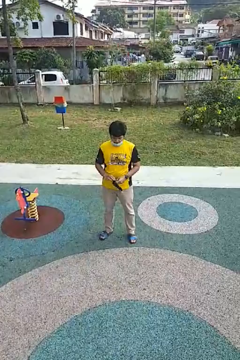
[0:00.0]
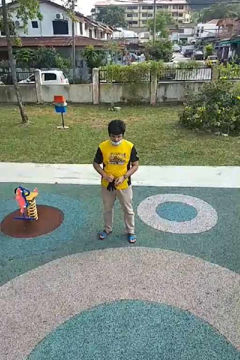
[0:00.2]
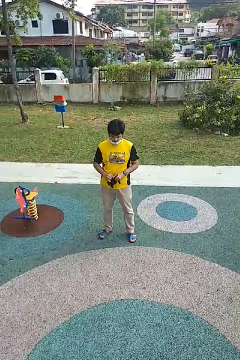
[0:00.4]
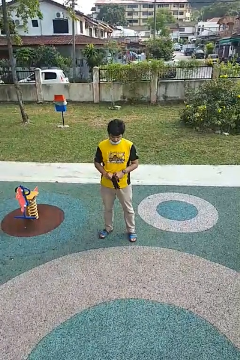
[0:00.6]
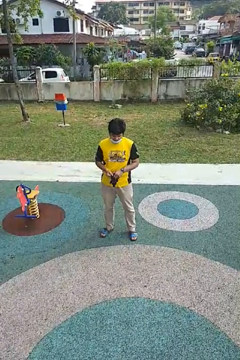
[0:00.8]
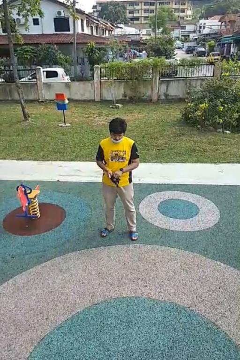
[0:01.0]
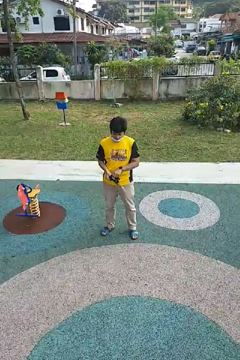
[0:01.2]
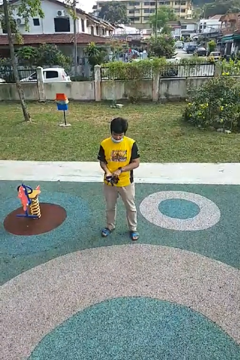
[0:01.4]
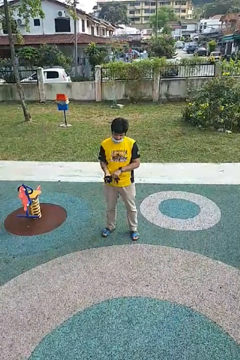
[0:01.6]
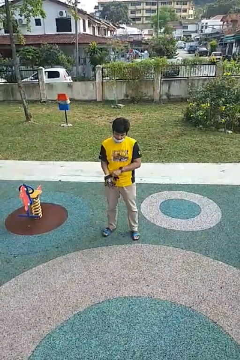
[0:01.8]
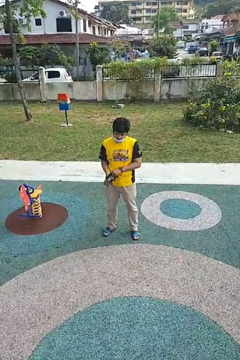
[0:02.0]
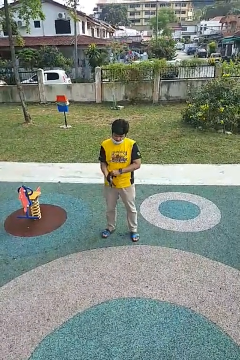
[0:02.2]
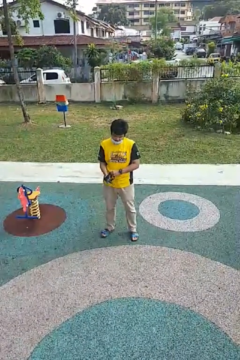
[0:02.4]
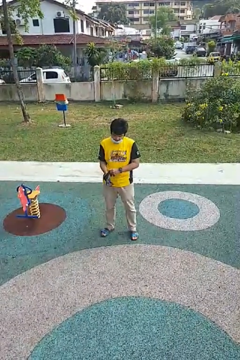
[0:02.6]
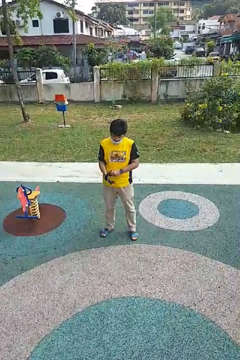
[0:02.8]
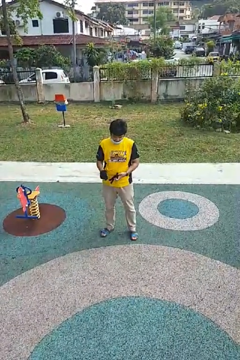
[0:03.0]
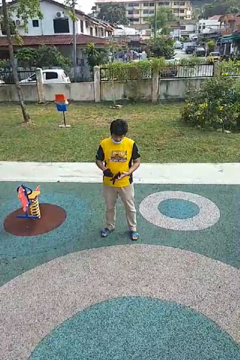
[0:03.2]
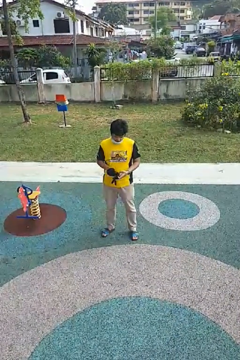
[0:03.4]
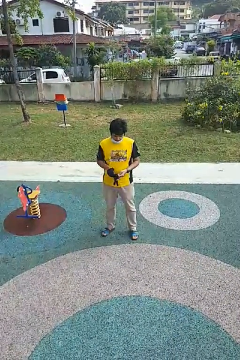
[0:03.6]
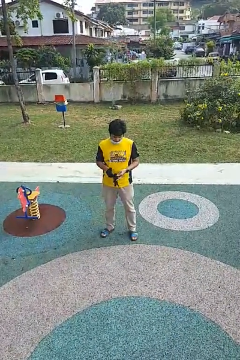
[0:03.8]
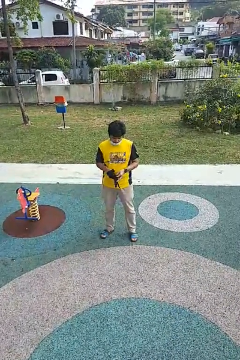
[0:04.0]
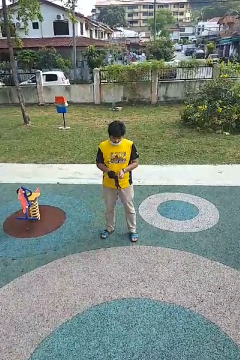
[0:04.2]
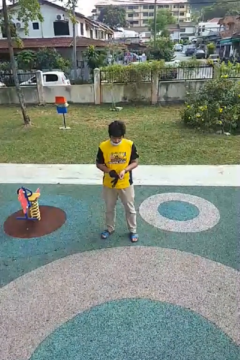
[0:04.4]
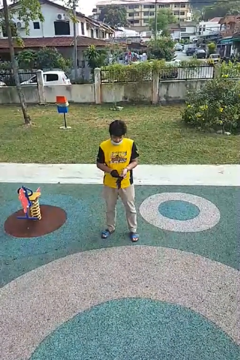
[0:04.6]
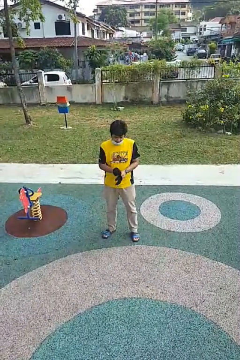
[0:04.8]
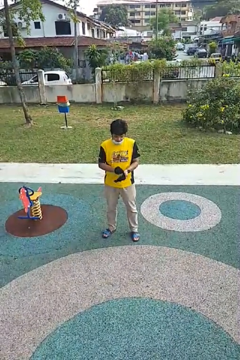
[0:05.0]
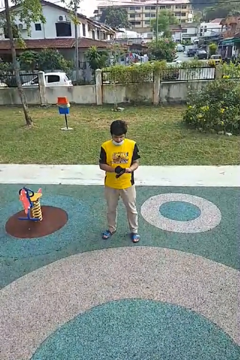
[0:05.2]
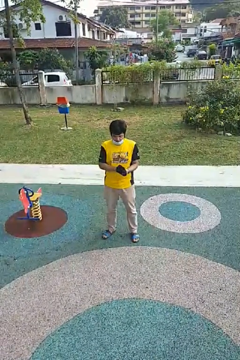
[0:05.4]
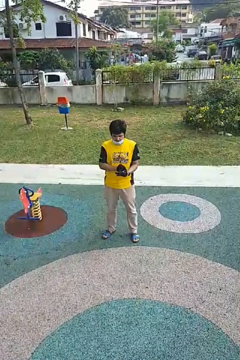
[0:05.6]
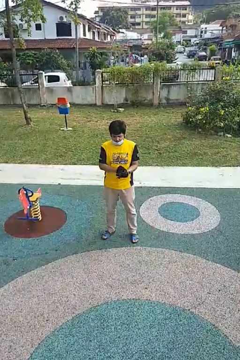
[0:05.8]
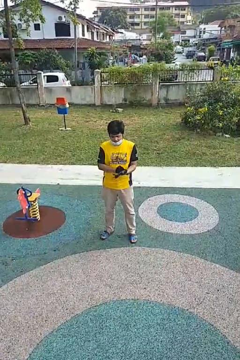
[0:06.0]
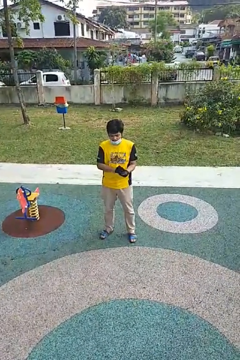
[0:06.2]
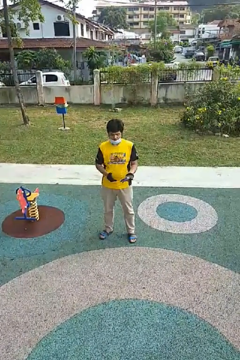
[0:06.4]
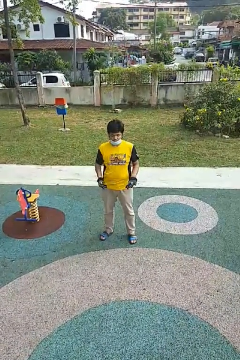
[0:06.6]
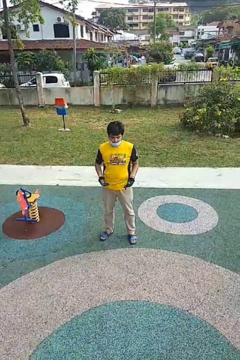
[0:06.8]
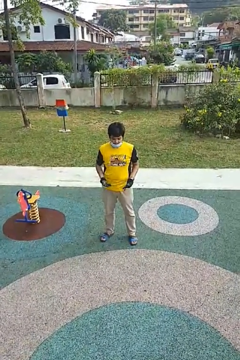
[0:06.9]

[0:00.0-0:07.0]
person puts on gloves

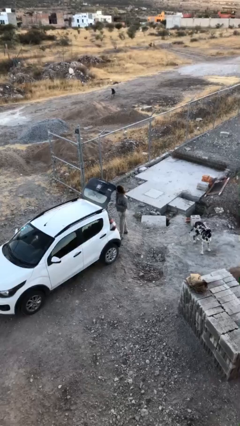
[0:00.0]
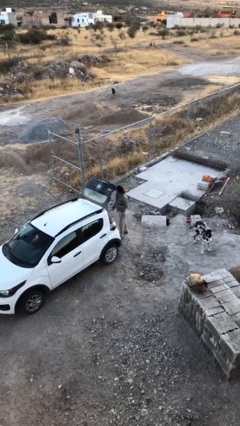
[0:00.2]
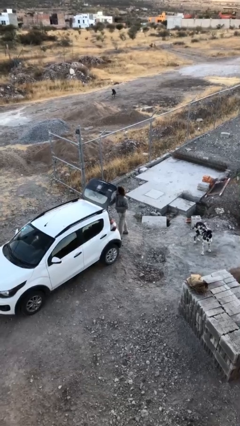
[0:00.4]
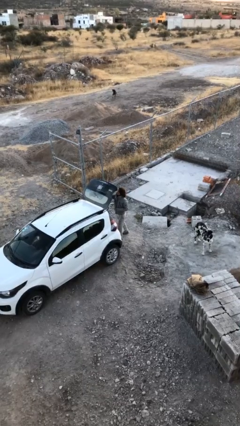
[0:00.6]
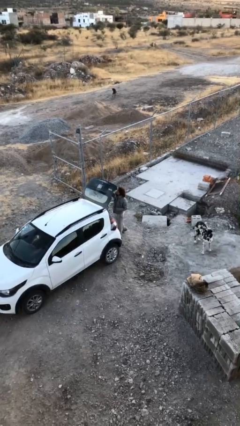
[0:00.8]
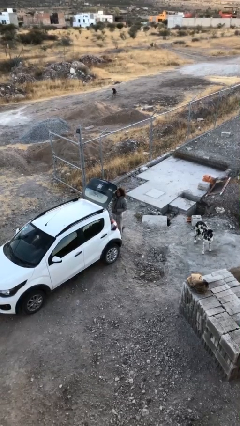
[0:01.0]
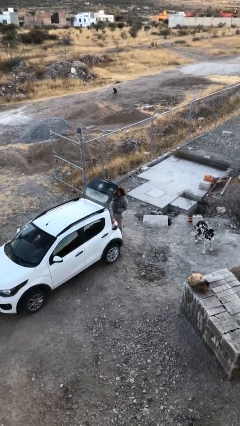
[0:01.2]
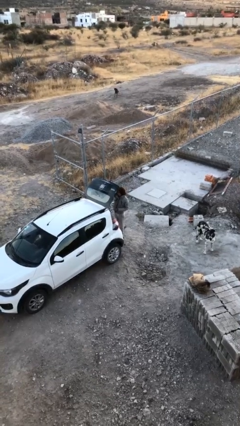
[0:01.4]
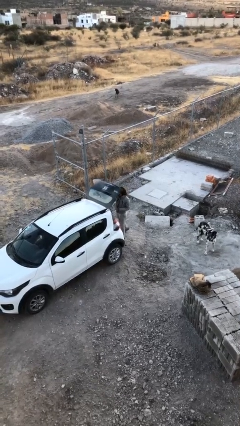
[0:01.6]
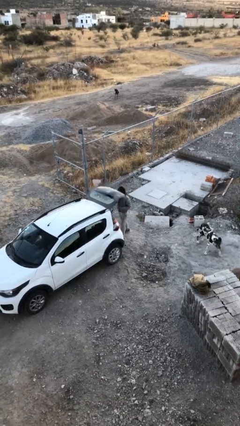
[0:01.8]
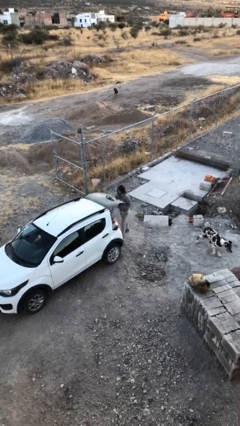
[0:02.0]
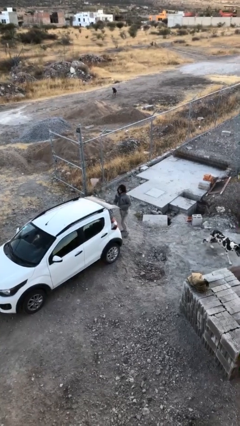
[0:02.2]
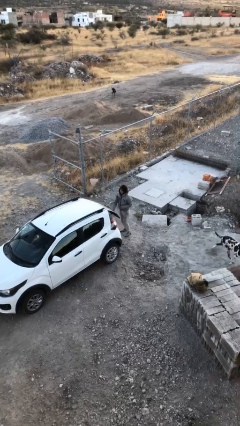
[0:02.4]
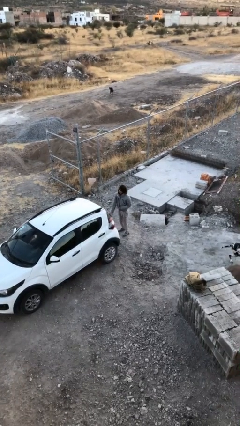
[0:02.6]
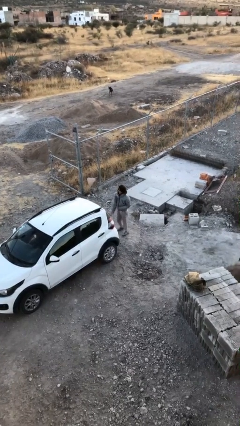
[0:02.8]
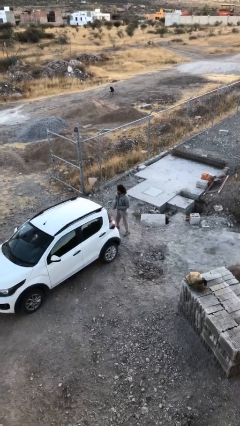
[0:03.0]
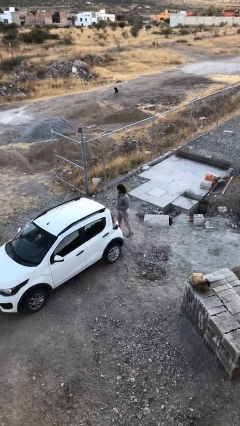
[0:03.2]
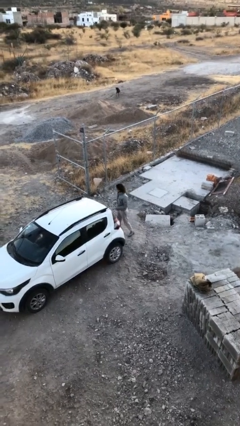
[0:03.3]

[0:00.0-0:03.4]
person closes car trunk

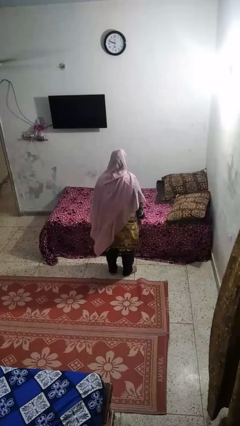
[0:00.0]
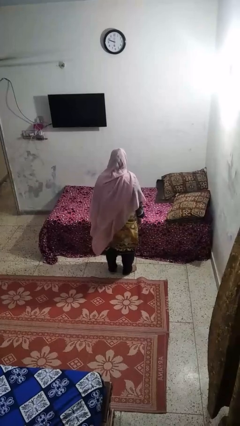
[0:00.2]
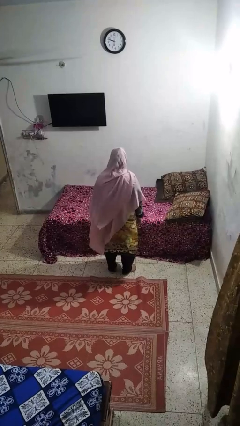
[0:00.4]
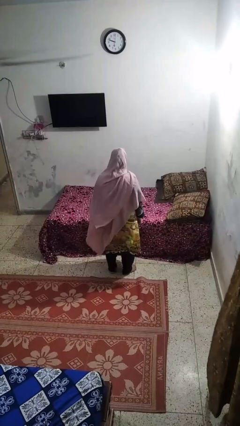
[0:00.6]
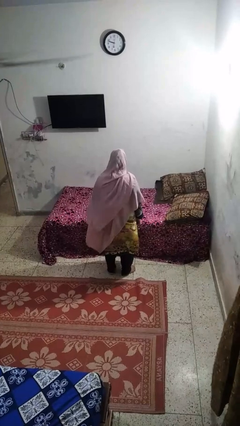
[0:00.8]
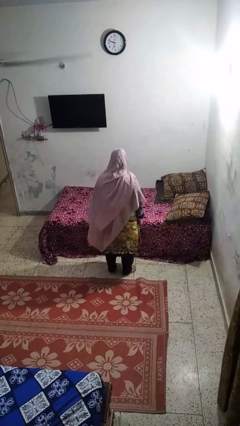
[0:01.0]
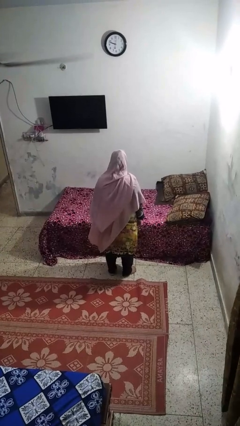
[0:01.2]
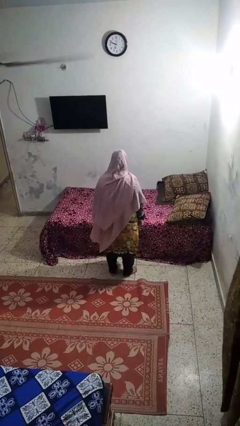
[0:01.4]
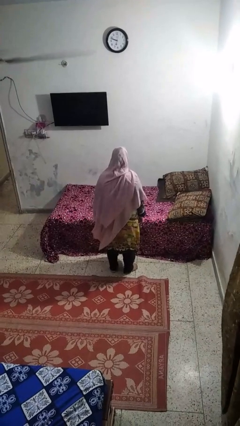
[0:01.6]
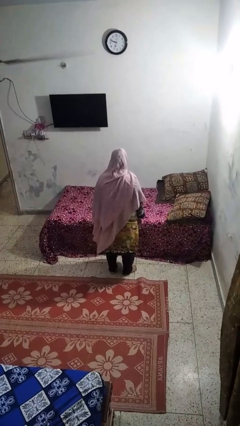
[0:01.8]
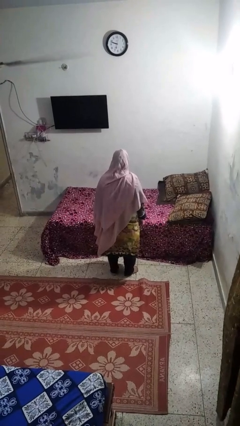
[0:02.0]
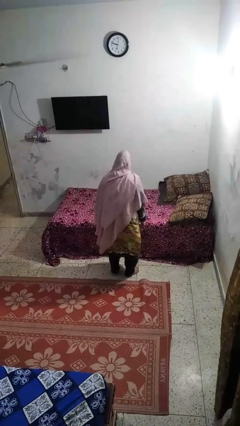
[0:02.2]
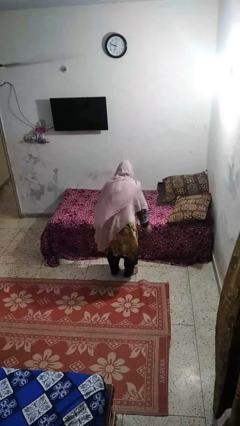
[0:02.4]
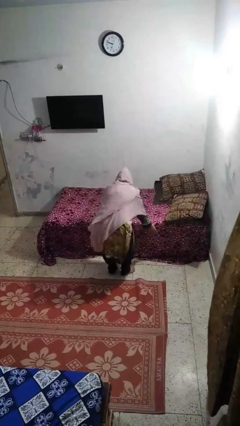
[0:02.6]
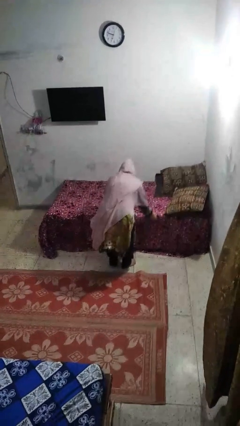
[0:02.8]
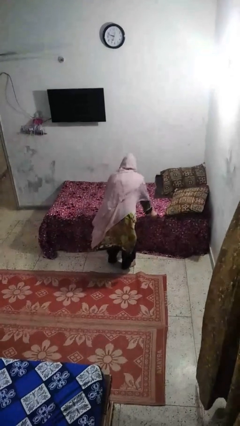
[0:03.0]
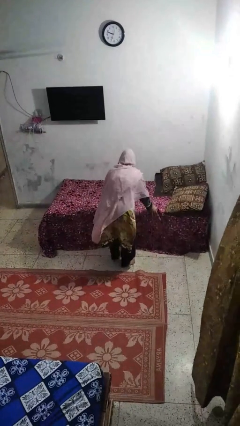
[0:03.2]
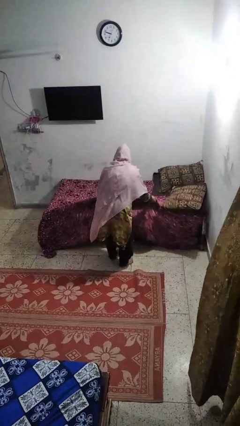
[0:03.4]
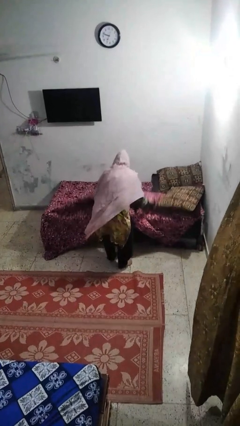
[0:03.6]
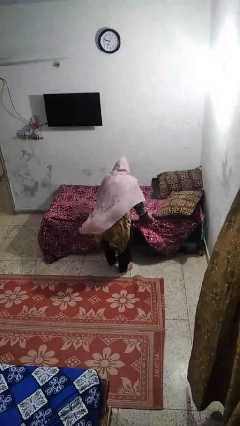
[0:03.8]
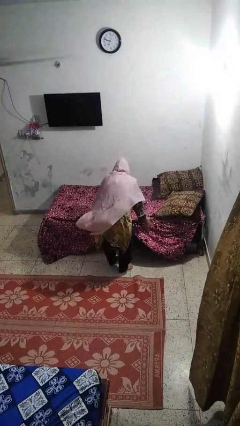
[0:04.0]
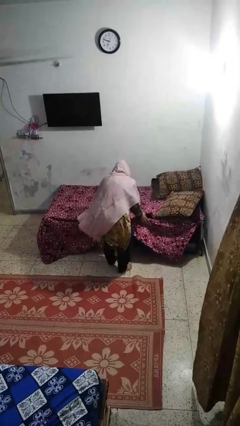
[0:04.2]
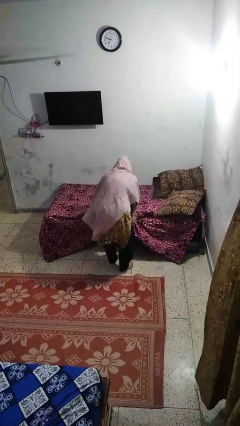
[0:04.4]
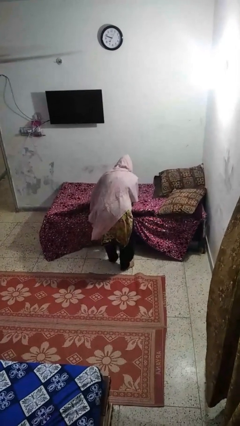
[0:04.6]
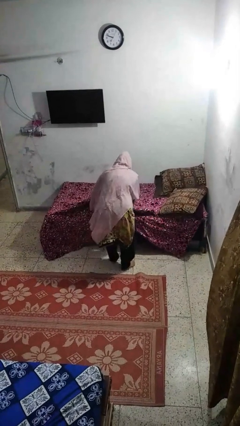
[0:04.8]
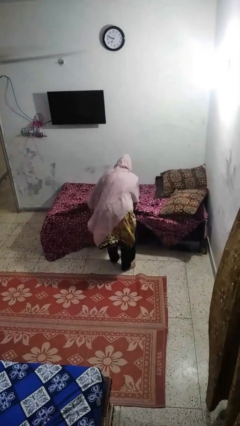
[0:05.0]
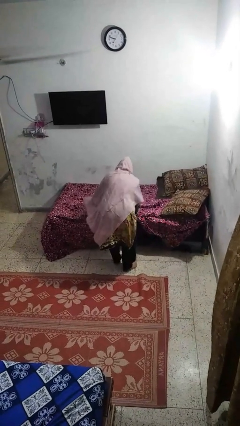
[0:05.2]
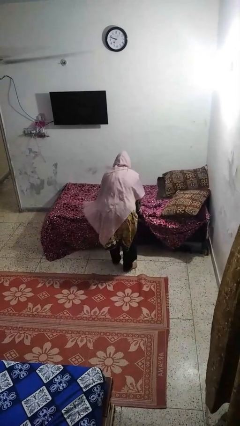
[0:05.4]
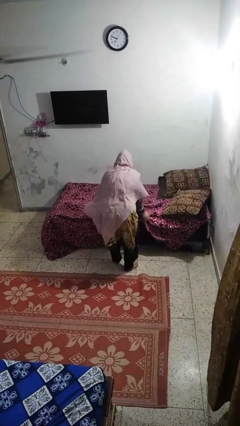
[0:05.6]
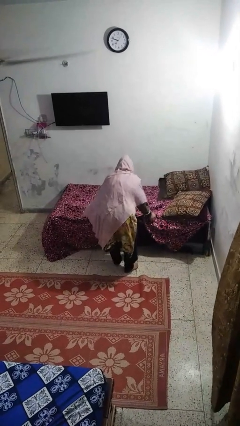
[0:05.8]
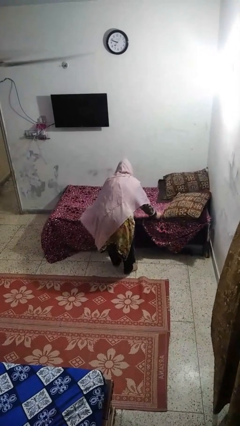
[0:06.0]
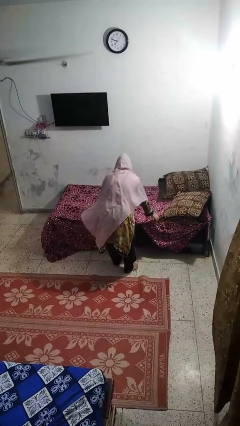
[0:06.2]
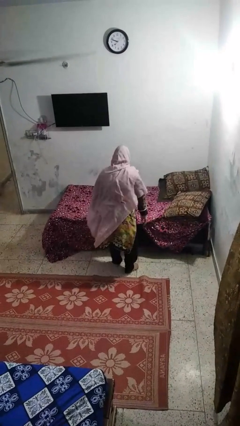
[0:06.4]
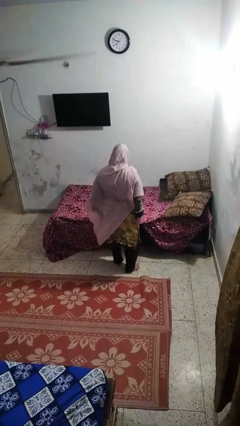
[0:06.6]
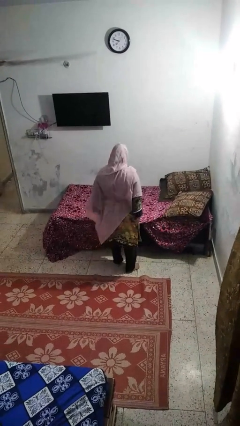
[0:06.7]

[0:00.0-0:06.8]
person makes bed

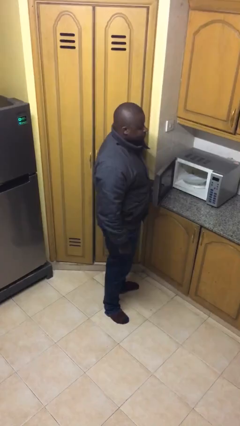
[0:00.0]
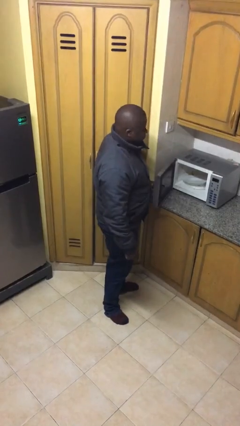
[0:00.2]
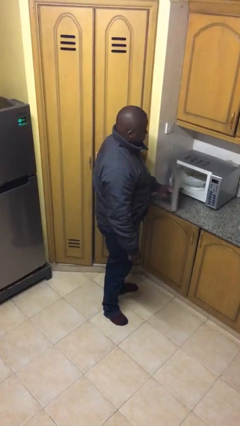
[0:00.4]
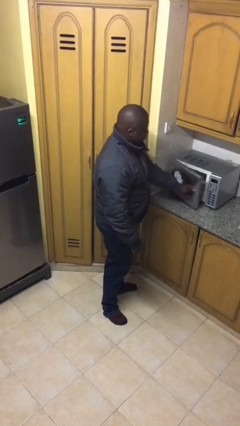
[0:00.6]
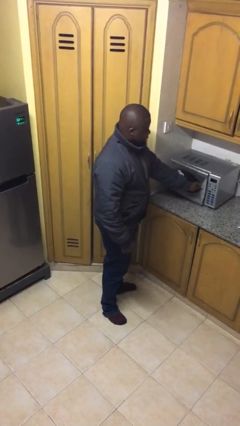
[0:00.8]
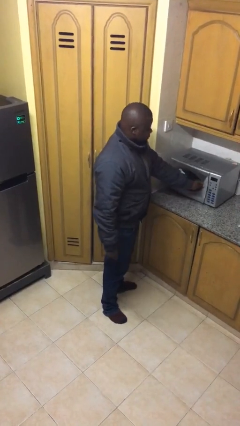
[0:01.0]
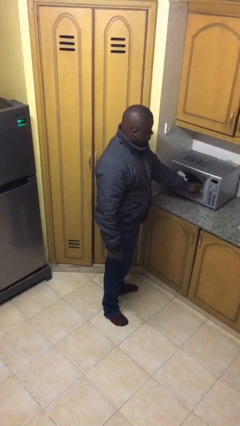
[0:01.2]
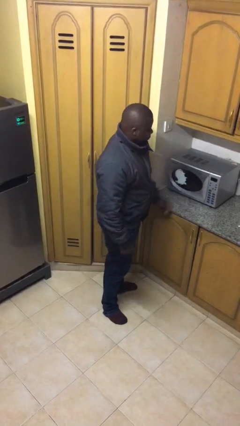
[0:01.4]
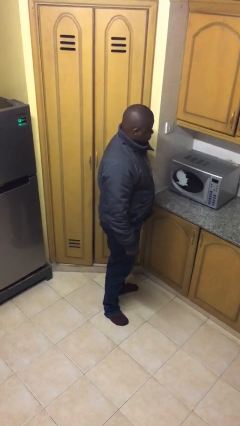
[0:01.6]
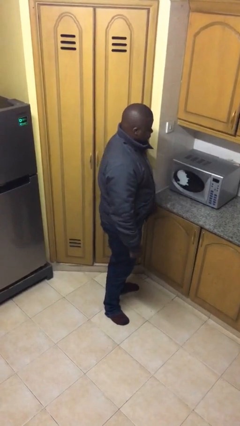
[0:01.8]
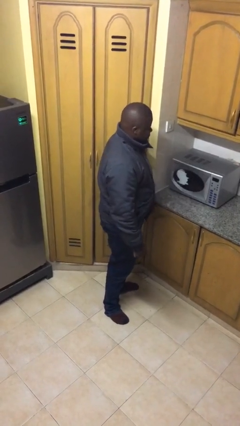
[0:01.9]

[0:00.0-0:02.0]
person closes microwave
